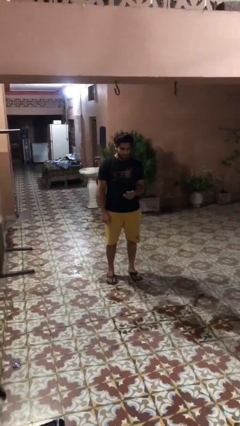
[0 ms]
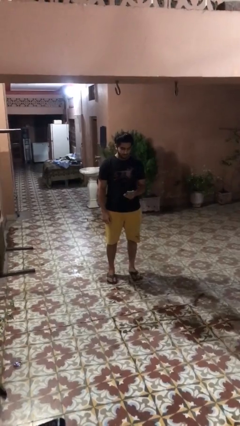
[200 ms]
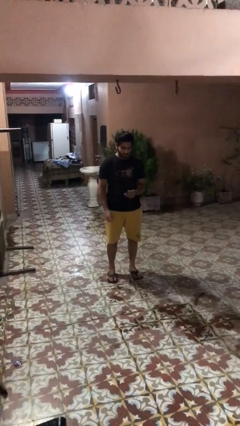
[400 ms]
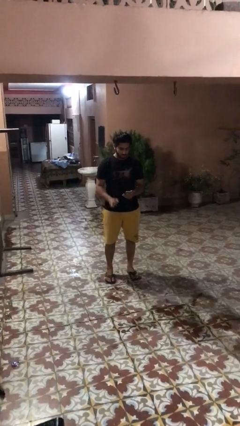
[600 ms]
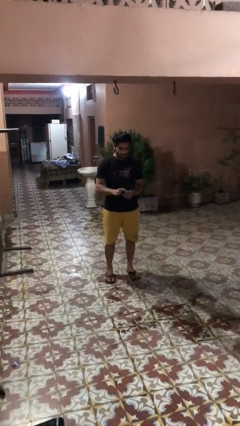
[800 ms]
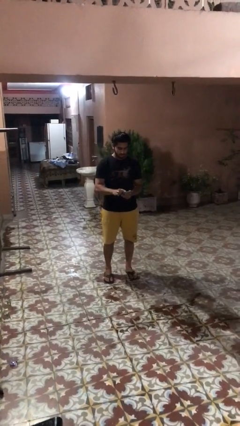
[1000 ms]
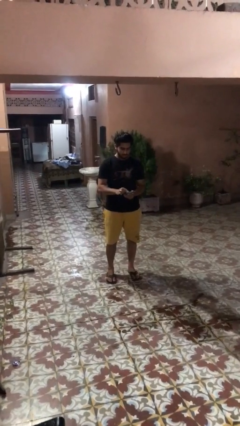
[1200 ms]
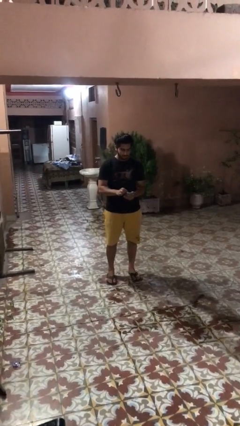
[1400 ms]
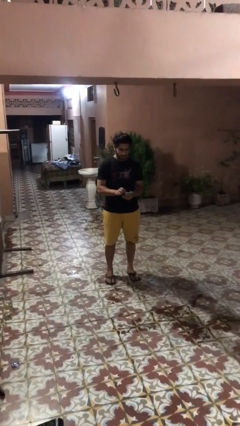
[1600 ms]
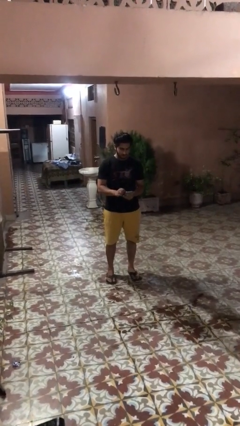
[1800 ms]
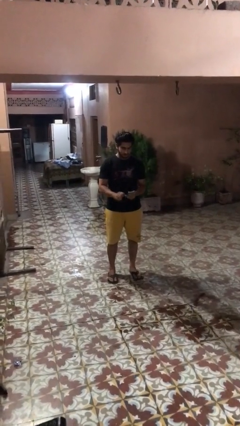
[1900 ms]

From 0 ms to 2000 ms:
person gestures zoom out

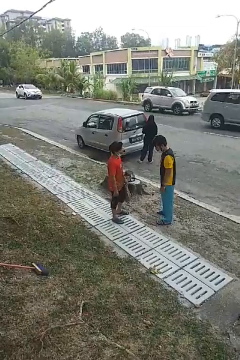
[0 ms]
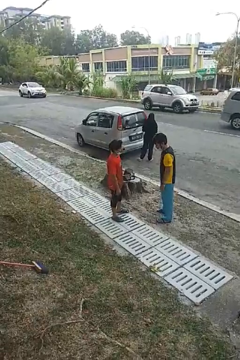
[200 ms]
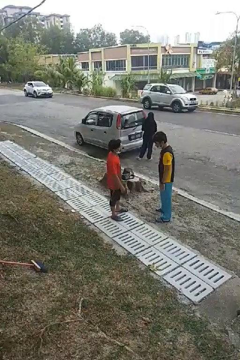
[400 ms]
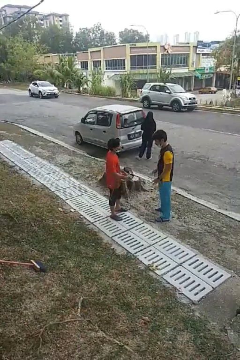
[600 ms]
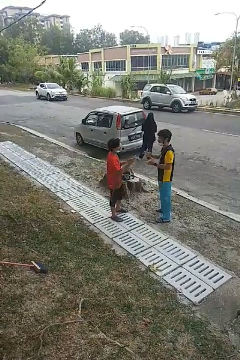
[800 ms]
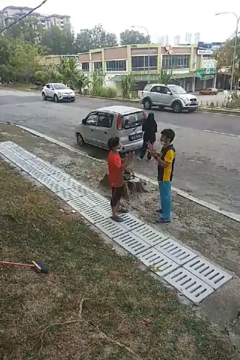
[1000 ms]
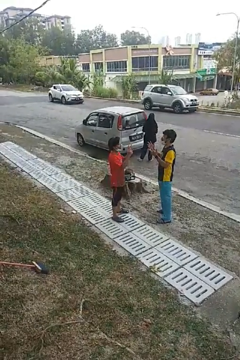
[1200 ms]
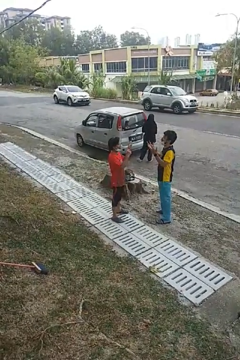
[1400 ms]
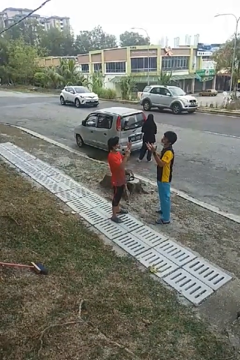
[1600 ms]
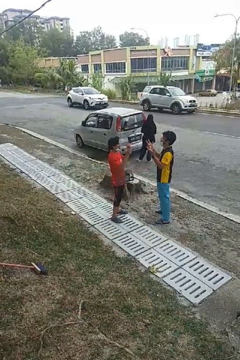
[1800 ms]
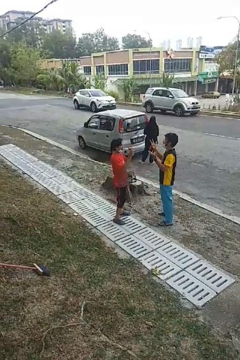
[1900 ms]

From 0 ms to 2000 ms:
person talks to person

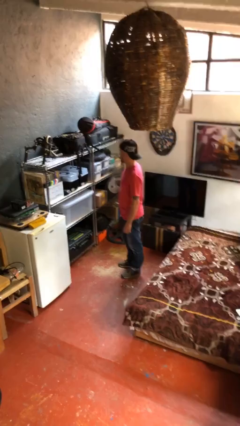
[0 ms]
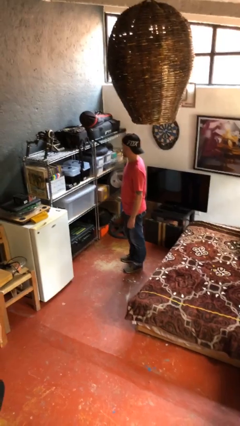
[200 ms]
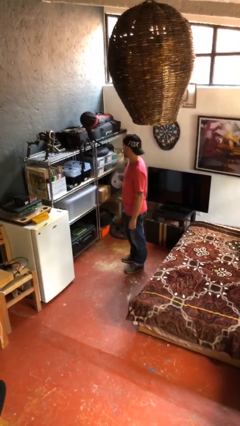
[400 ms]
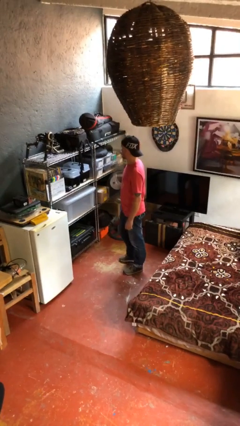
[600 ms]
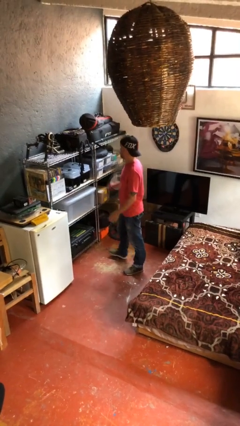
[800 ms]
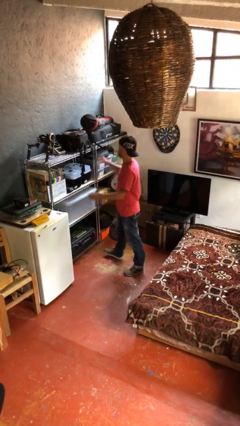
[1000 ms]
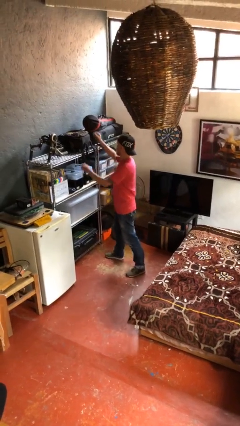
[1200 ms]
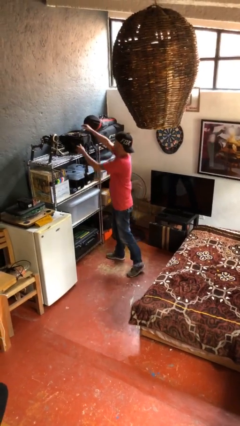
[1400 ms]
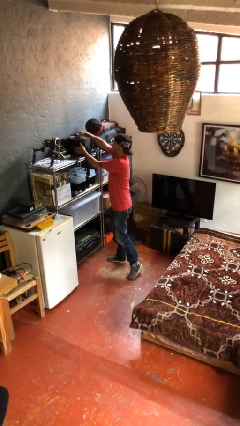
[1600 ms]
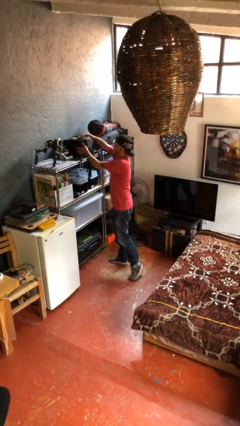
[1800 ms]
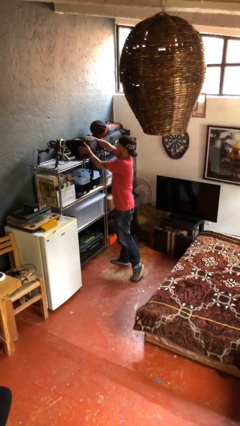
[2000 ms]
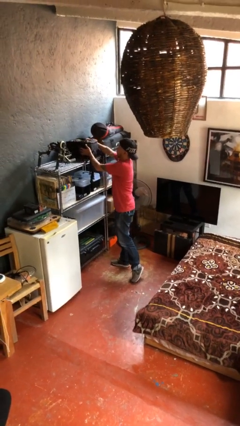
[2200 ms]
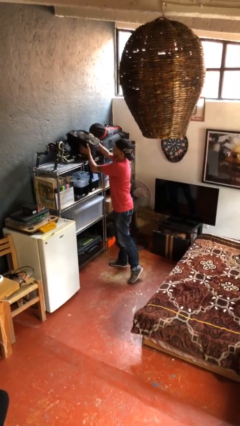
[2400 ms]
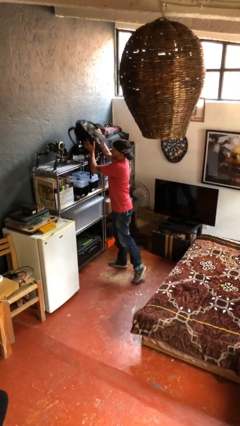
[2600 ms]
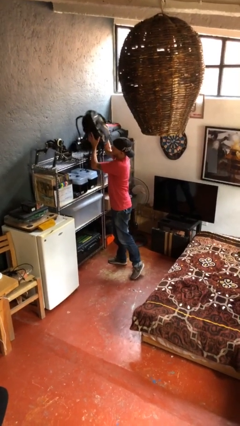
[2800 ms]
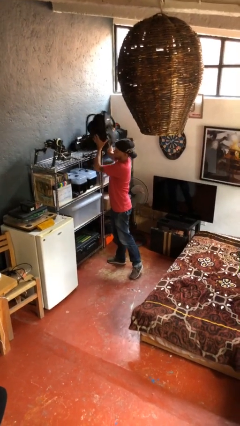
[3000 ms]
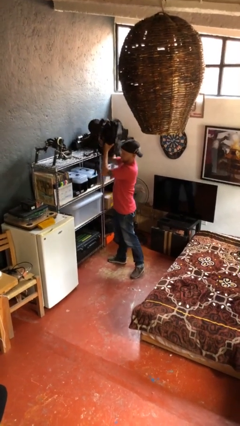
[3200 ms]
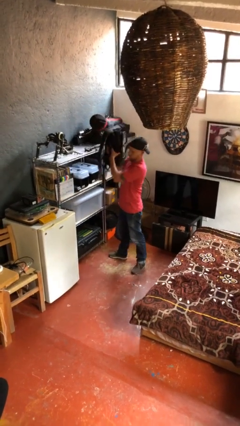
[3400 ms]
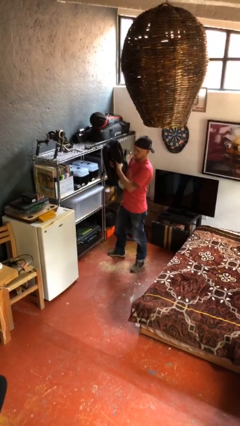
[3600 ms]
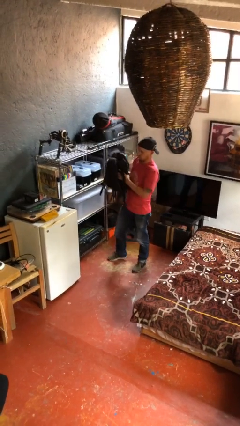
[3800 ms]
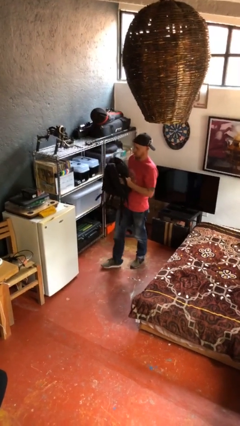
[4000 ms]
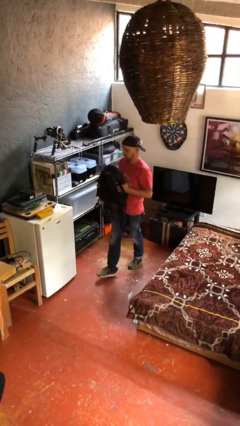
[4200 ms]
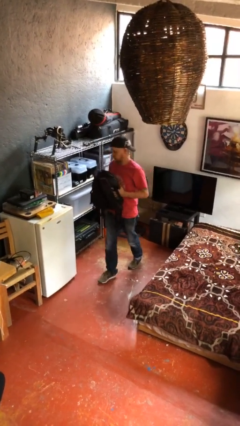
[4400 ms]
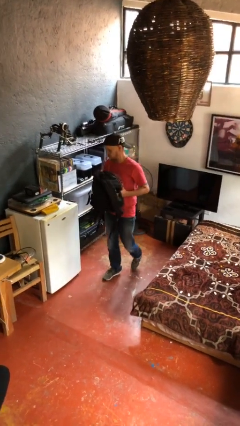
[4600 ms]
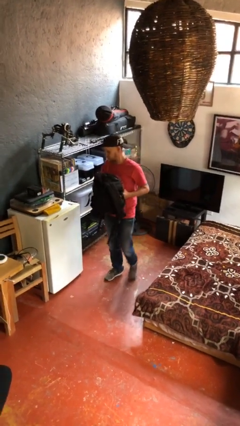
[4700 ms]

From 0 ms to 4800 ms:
person picks up object from shelf

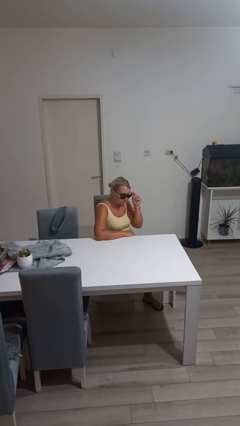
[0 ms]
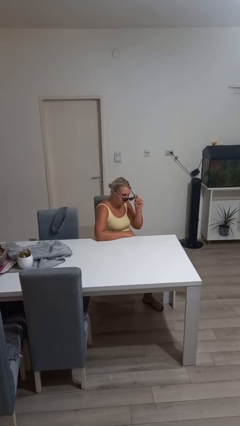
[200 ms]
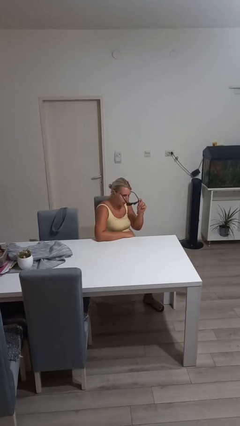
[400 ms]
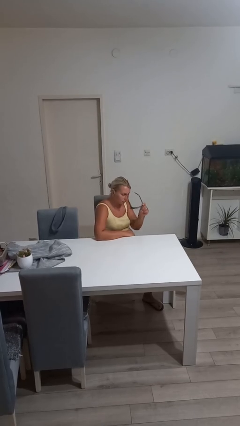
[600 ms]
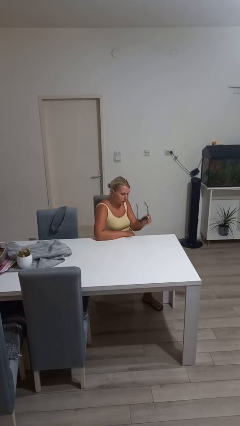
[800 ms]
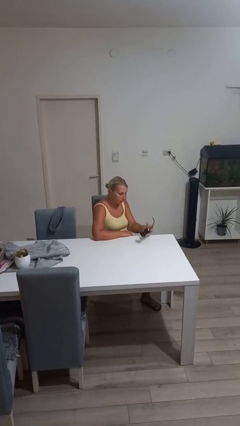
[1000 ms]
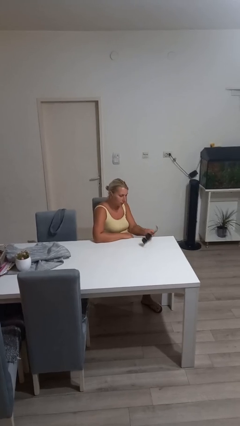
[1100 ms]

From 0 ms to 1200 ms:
person takes off sunglasses

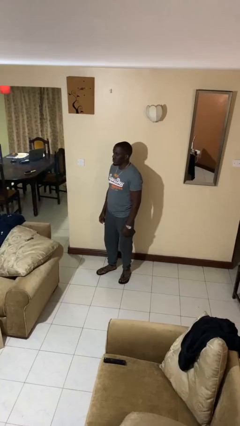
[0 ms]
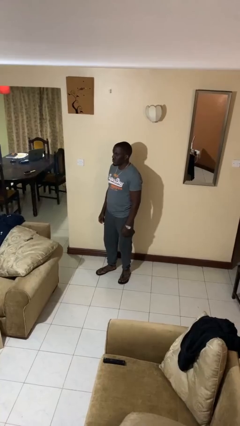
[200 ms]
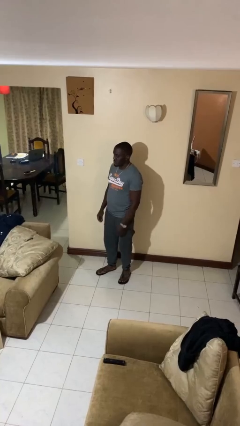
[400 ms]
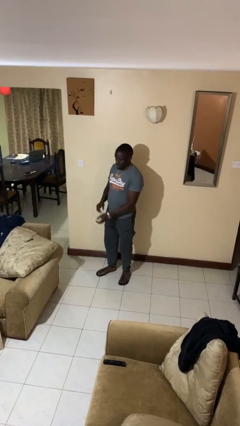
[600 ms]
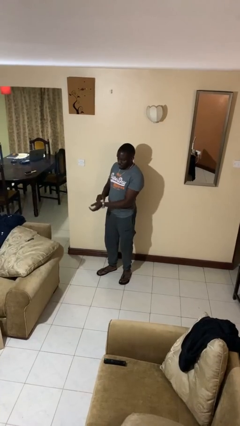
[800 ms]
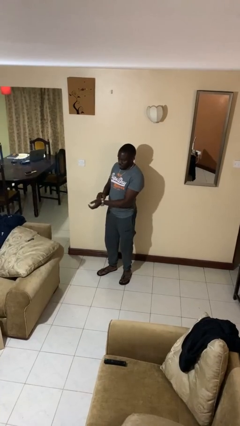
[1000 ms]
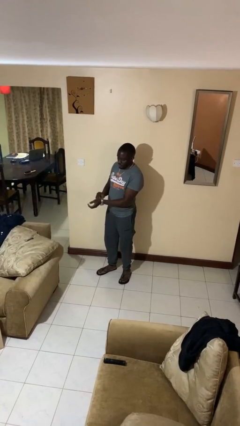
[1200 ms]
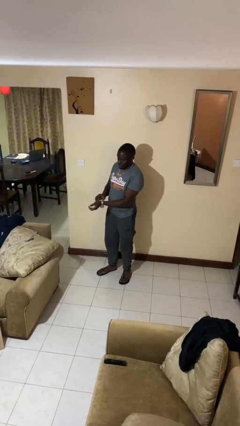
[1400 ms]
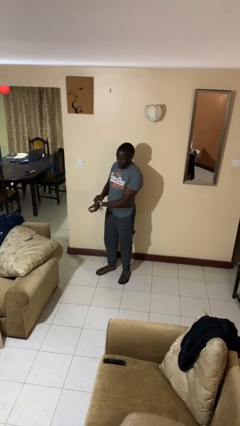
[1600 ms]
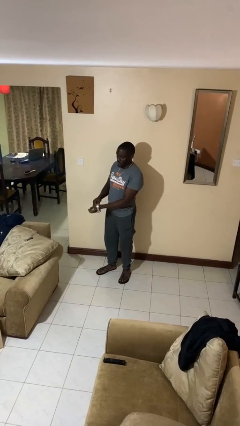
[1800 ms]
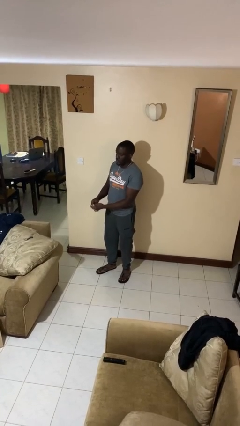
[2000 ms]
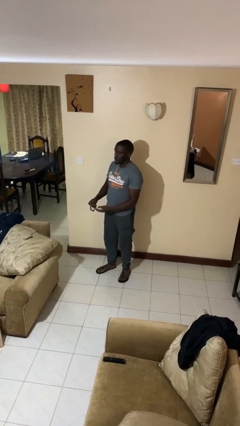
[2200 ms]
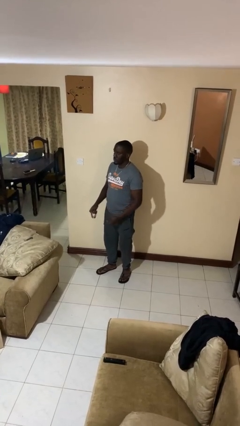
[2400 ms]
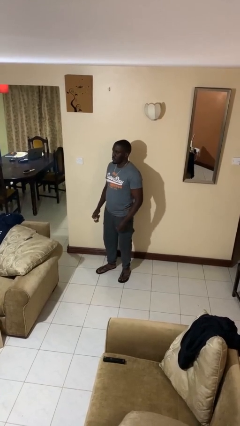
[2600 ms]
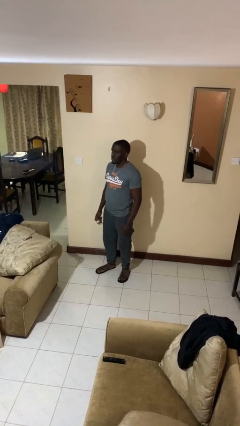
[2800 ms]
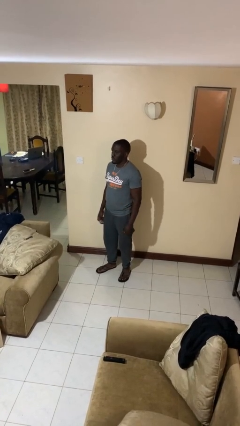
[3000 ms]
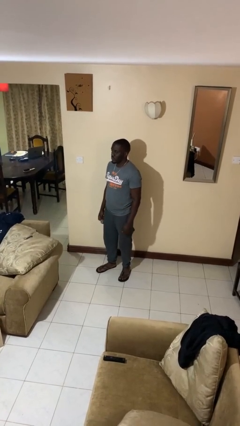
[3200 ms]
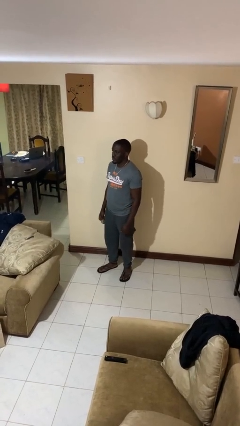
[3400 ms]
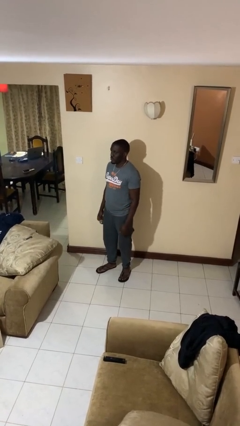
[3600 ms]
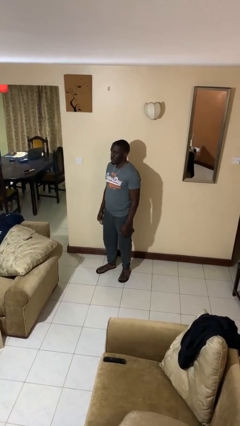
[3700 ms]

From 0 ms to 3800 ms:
person takes off wristwatch

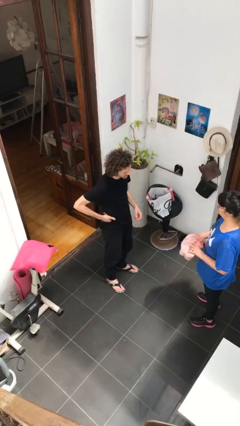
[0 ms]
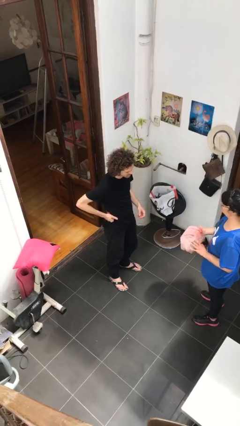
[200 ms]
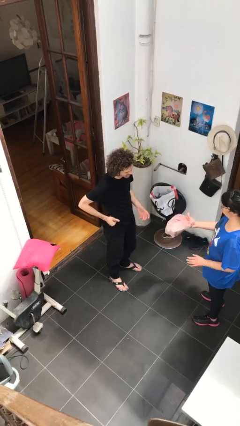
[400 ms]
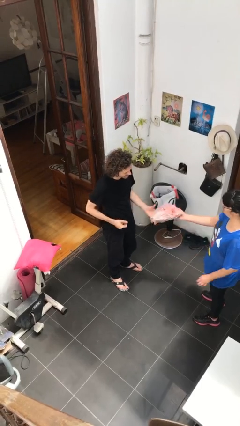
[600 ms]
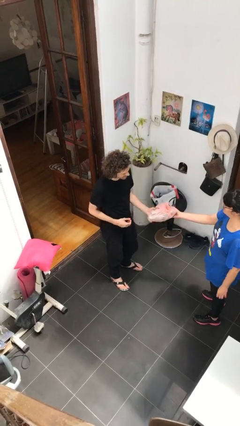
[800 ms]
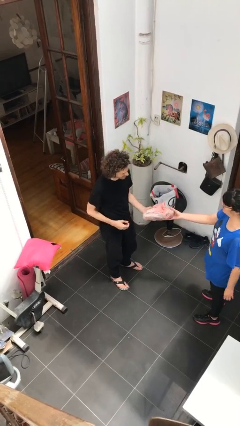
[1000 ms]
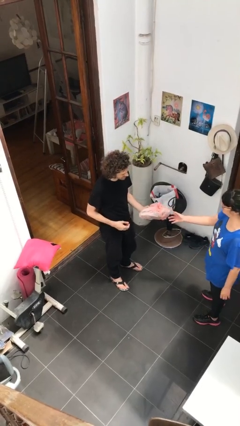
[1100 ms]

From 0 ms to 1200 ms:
person transfers object to person

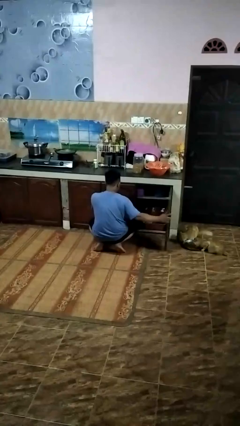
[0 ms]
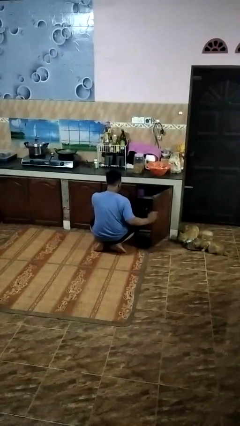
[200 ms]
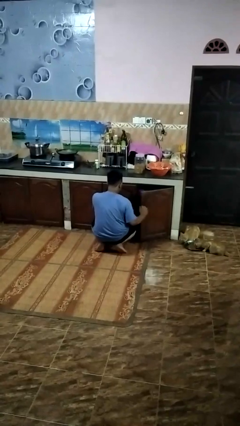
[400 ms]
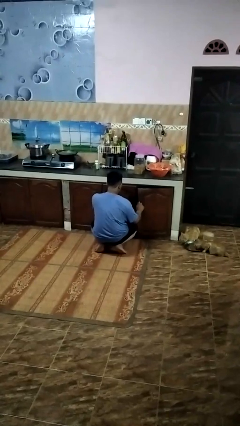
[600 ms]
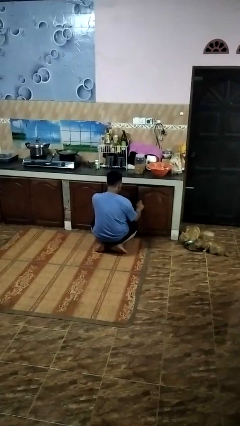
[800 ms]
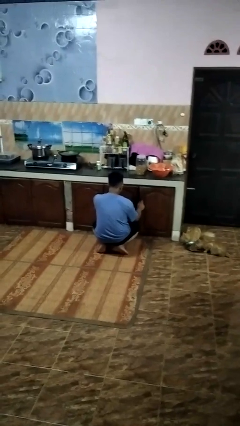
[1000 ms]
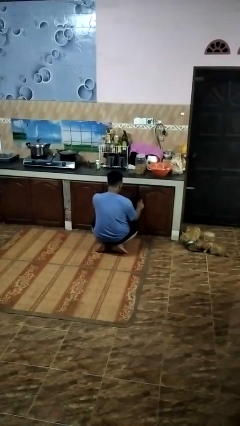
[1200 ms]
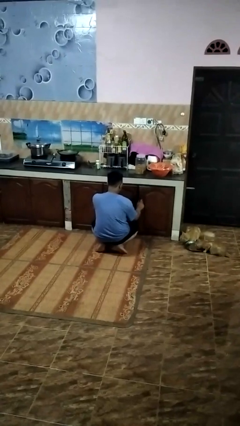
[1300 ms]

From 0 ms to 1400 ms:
person closes kitchen drawer

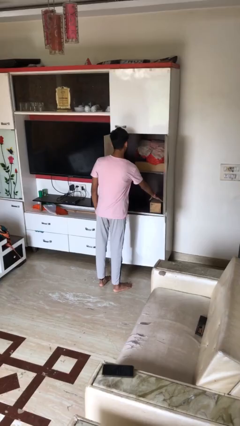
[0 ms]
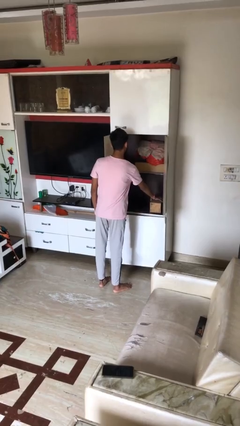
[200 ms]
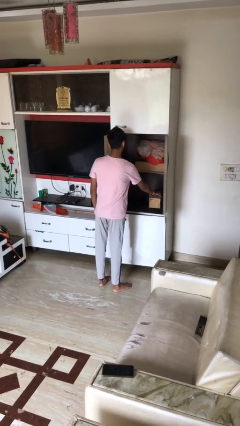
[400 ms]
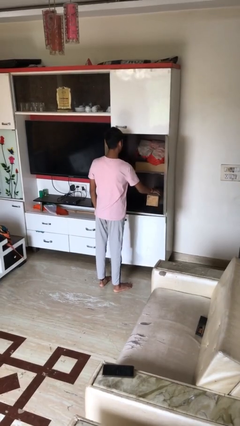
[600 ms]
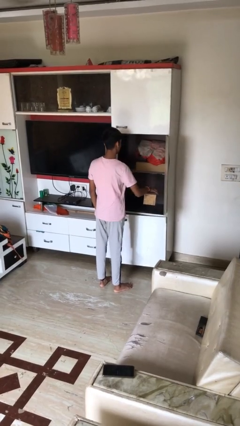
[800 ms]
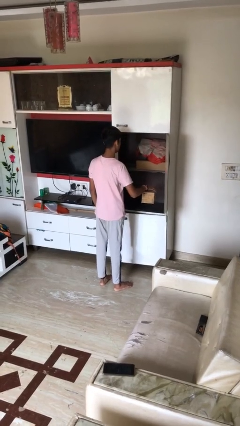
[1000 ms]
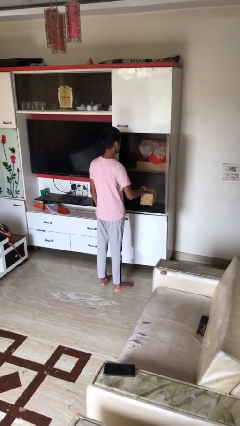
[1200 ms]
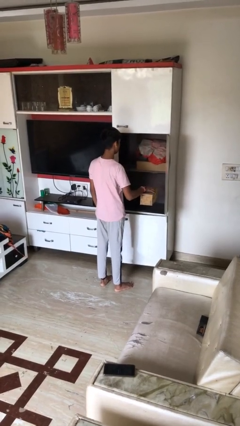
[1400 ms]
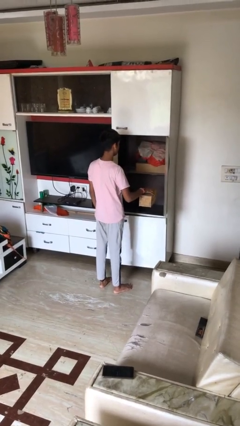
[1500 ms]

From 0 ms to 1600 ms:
person picks up object from cabinet
